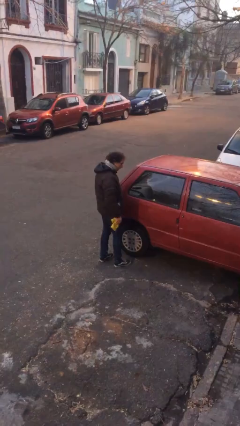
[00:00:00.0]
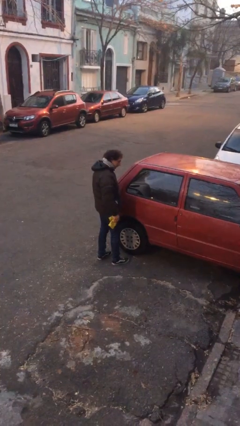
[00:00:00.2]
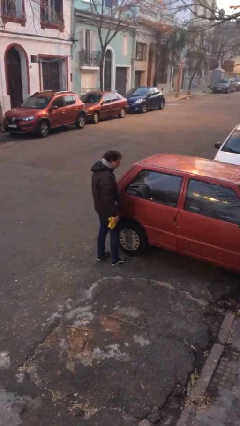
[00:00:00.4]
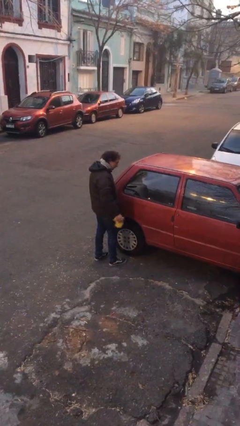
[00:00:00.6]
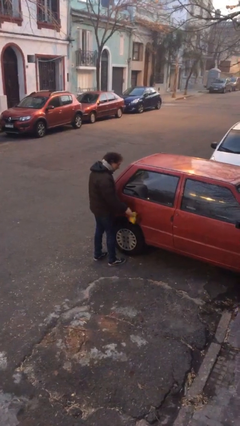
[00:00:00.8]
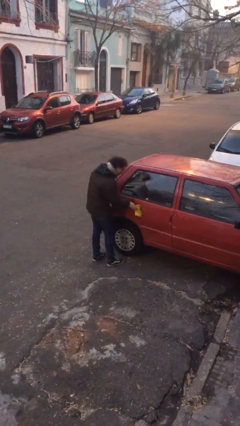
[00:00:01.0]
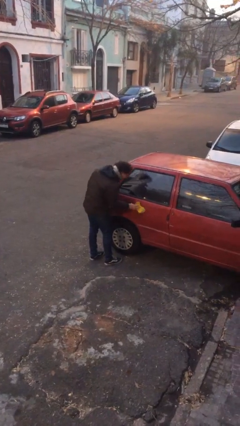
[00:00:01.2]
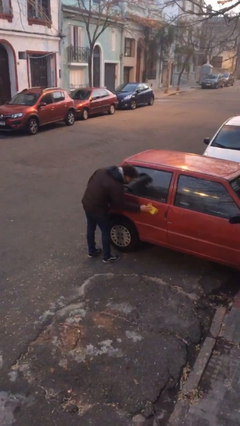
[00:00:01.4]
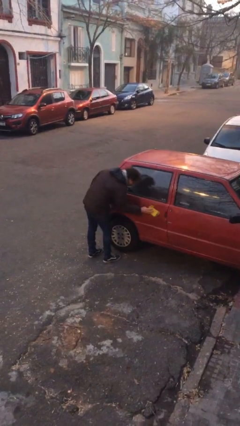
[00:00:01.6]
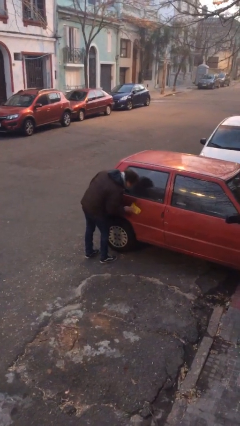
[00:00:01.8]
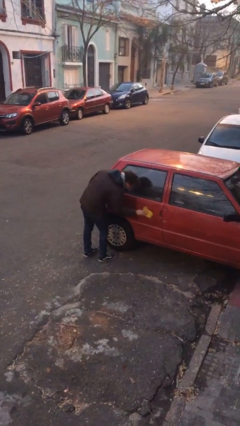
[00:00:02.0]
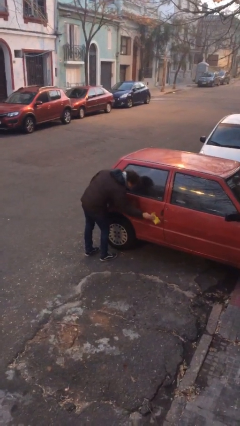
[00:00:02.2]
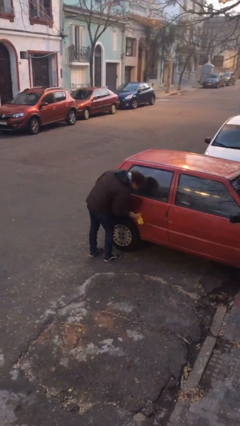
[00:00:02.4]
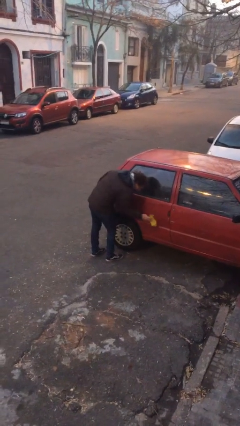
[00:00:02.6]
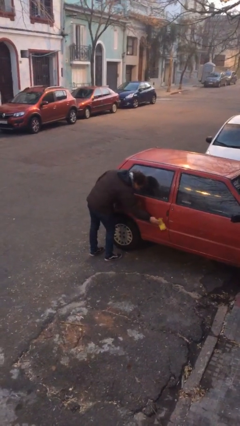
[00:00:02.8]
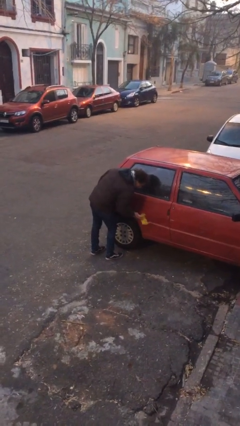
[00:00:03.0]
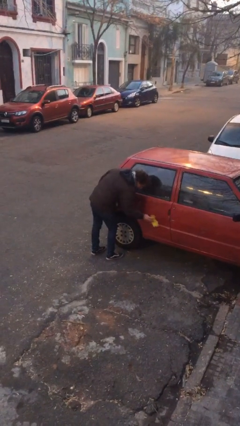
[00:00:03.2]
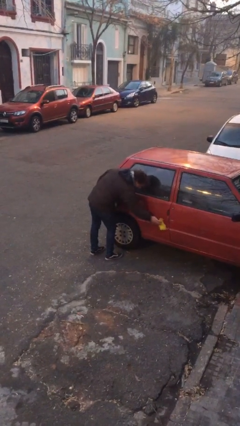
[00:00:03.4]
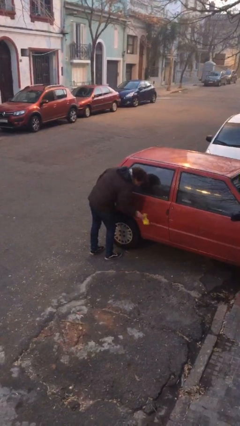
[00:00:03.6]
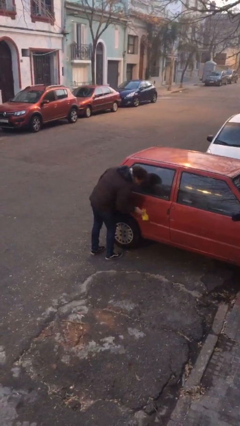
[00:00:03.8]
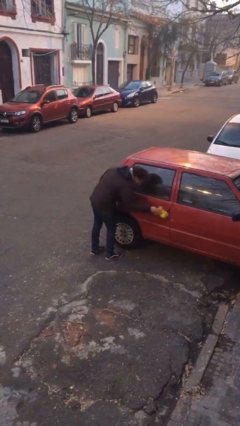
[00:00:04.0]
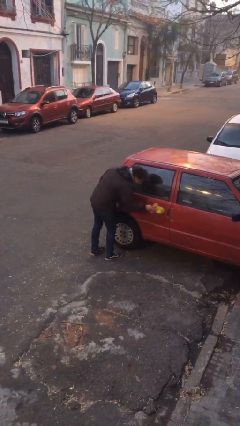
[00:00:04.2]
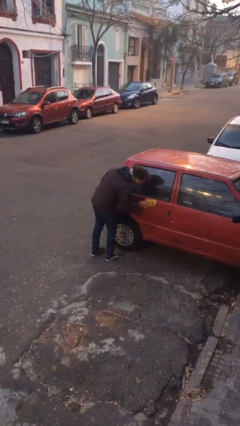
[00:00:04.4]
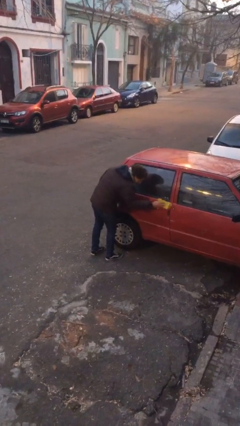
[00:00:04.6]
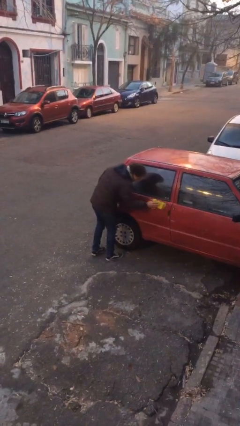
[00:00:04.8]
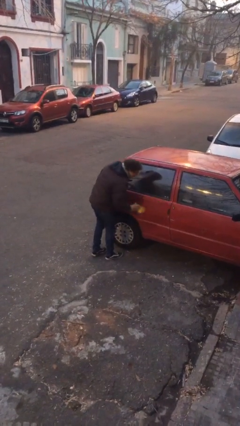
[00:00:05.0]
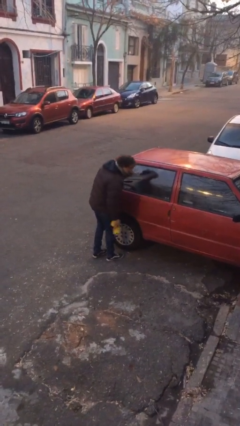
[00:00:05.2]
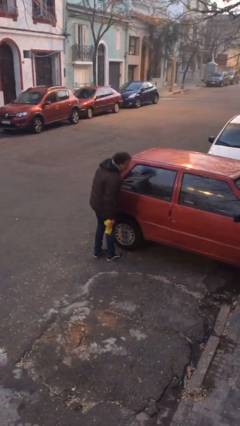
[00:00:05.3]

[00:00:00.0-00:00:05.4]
person polishes car with rag

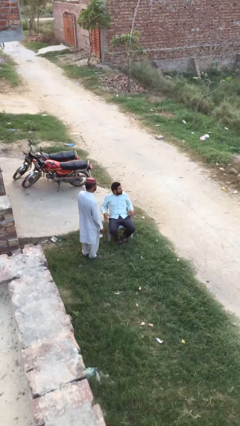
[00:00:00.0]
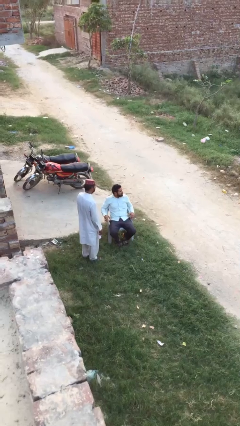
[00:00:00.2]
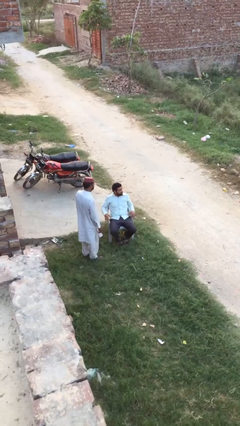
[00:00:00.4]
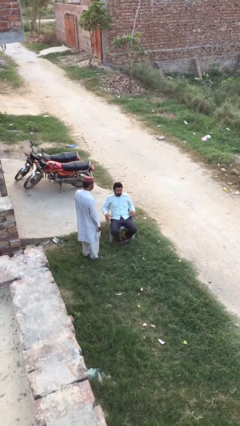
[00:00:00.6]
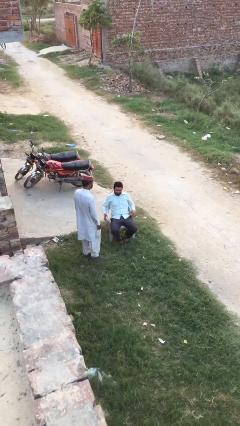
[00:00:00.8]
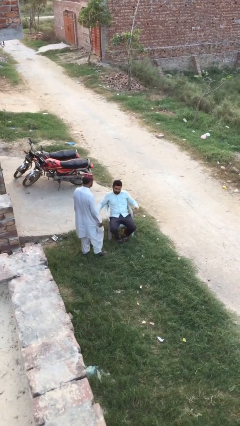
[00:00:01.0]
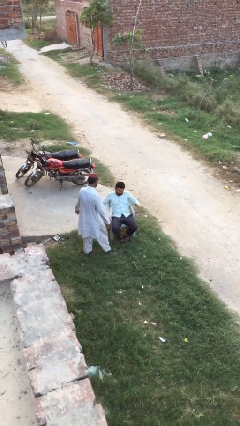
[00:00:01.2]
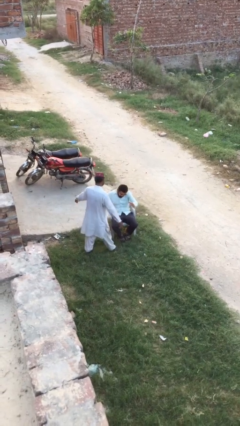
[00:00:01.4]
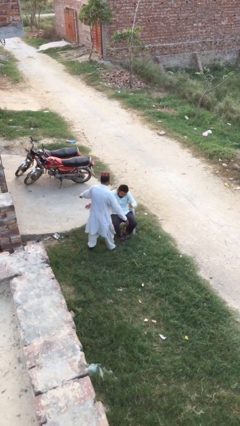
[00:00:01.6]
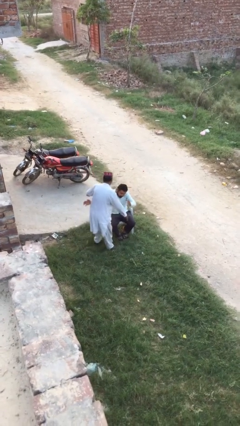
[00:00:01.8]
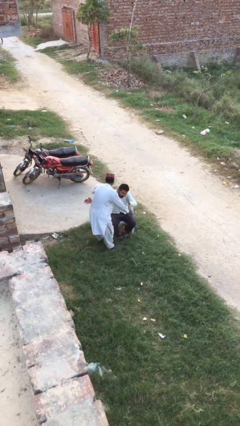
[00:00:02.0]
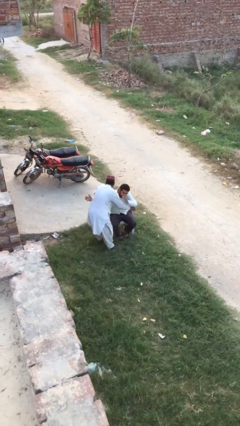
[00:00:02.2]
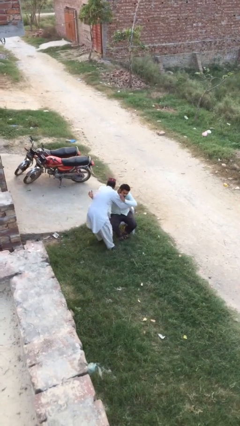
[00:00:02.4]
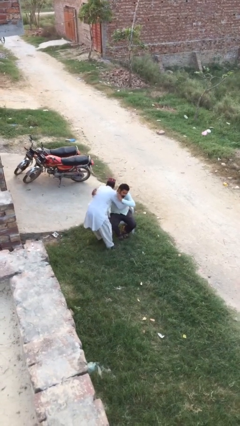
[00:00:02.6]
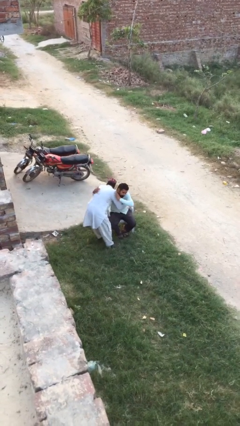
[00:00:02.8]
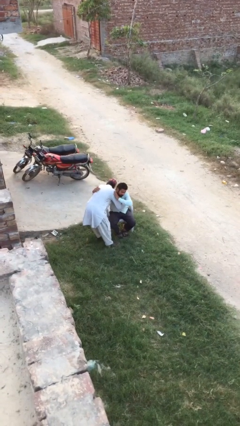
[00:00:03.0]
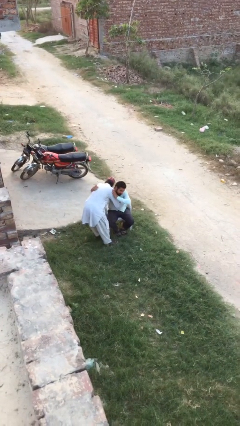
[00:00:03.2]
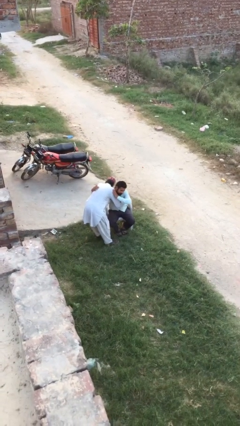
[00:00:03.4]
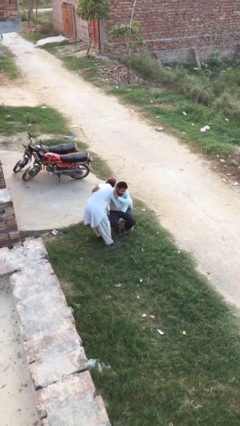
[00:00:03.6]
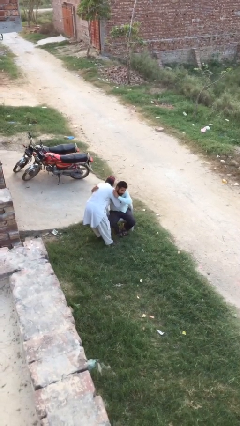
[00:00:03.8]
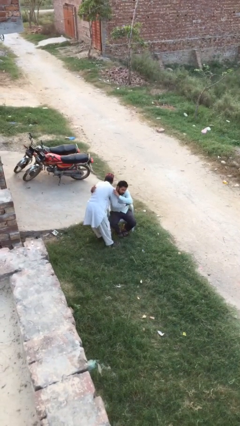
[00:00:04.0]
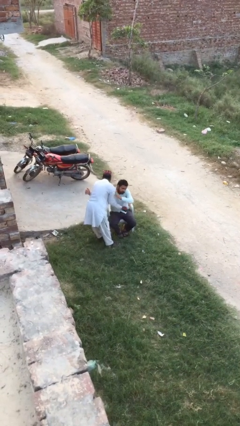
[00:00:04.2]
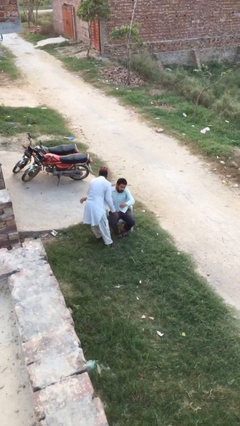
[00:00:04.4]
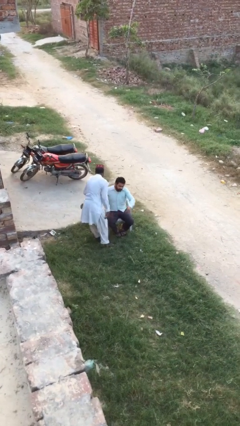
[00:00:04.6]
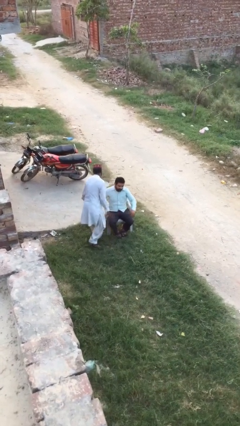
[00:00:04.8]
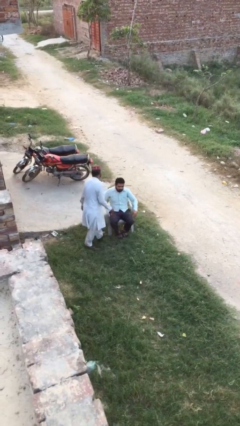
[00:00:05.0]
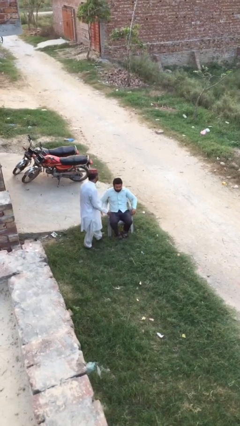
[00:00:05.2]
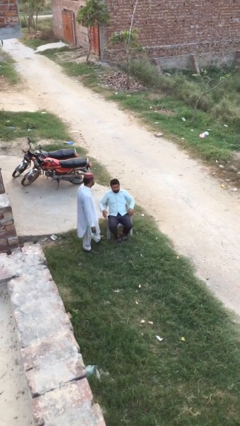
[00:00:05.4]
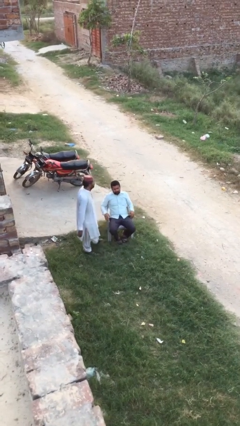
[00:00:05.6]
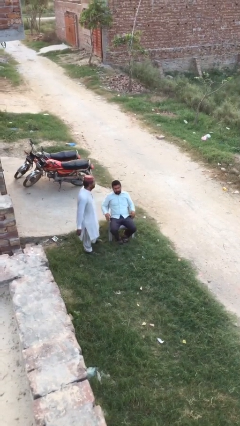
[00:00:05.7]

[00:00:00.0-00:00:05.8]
person embraces person

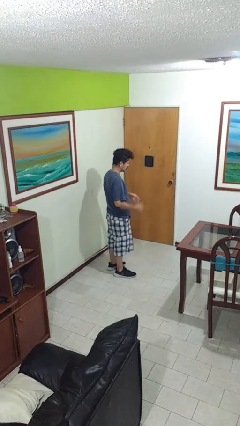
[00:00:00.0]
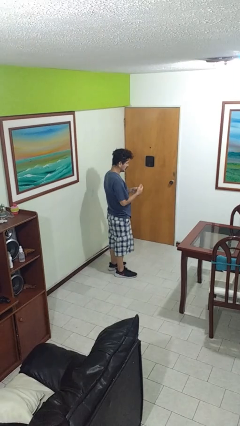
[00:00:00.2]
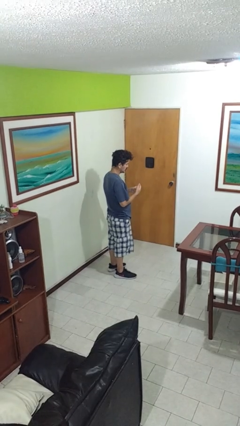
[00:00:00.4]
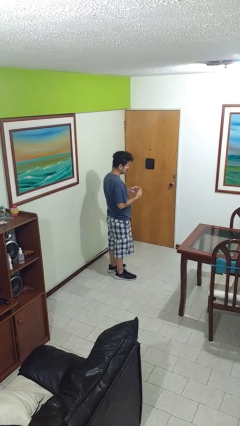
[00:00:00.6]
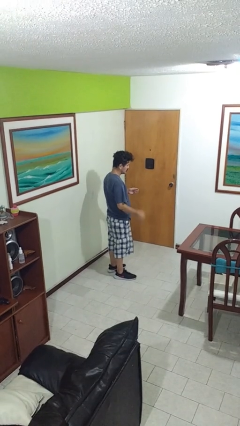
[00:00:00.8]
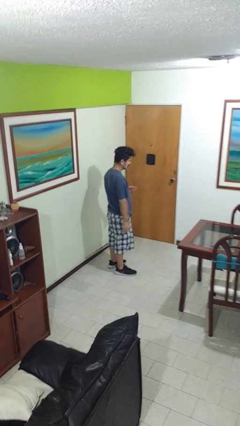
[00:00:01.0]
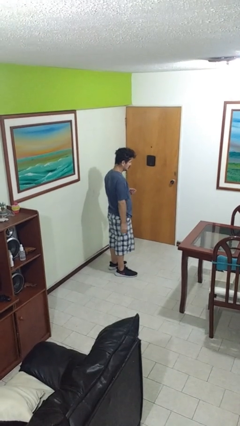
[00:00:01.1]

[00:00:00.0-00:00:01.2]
person takes off ring

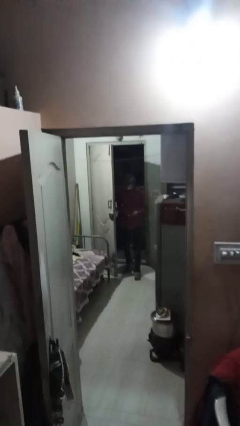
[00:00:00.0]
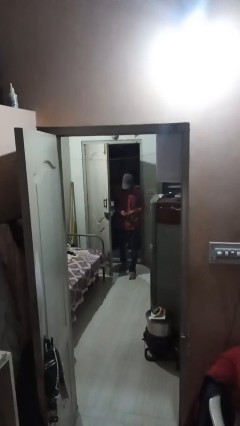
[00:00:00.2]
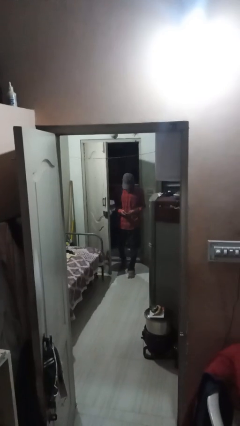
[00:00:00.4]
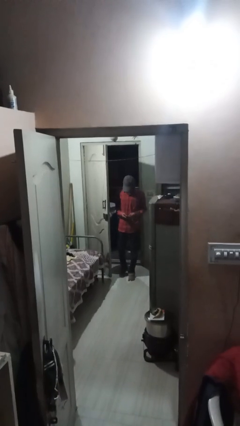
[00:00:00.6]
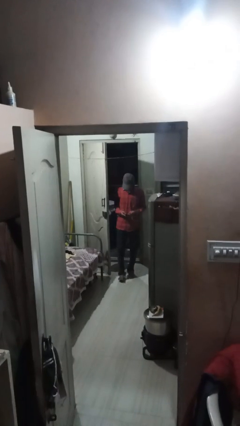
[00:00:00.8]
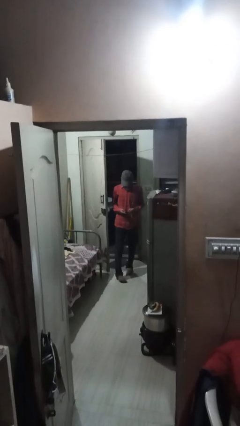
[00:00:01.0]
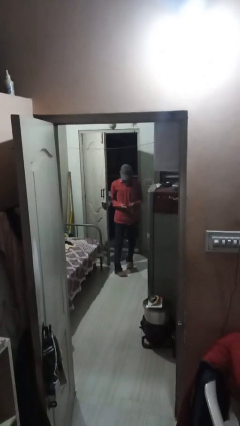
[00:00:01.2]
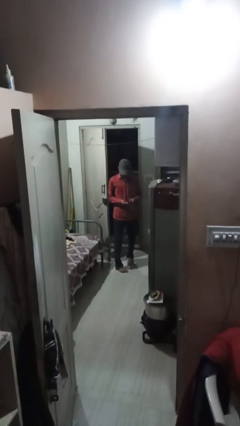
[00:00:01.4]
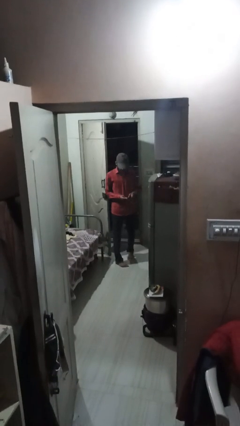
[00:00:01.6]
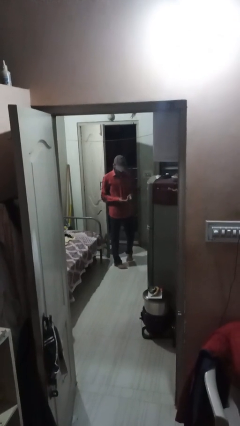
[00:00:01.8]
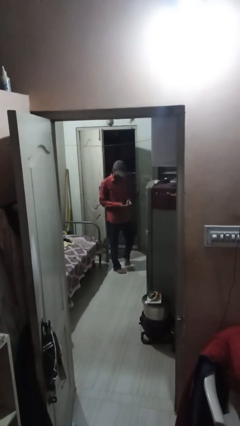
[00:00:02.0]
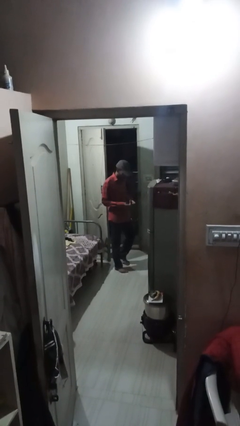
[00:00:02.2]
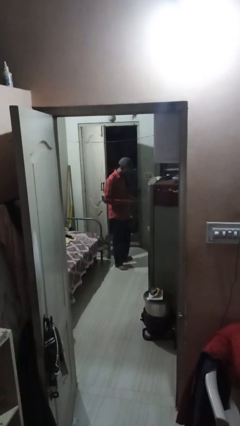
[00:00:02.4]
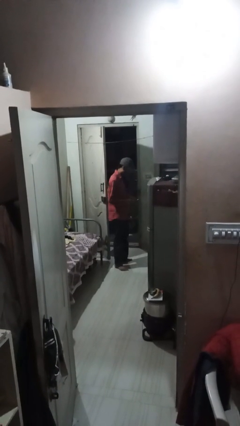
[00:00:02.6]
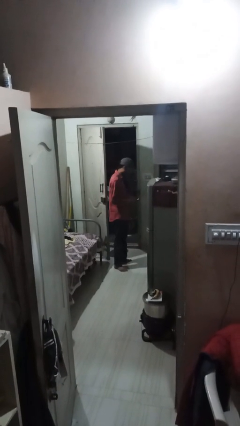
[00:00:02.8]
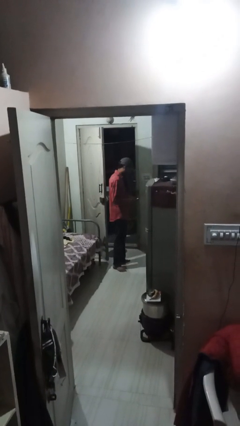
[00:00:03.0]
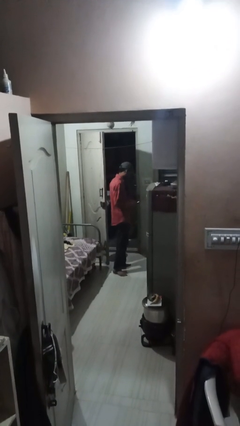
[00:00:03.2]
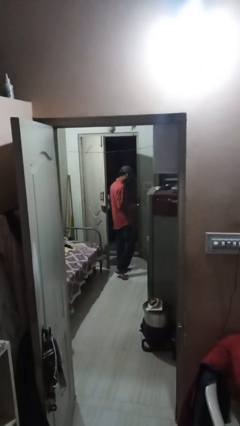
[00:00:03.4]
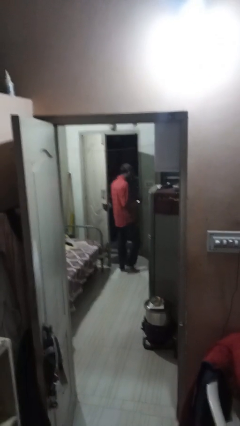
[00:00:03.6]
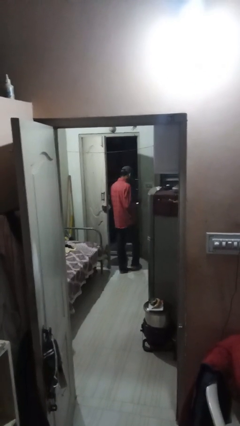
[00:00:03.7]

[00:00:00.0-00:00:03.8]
person enters scene through structure

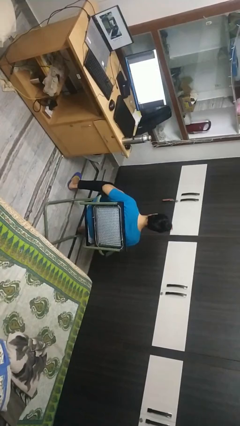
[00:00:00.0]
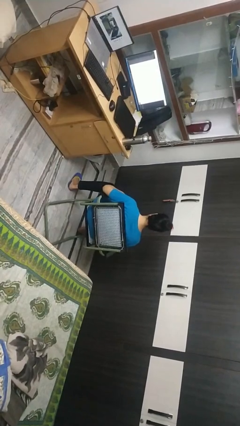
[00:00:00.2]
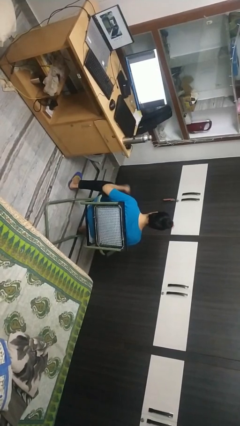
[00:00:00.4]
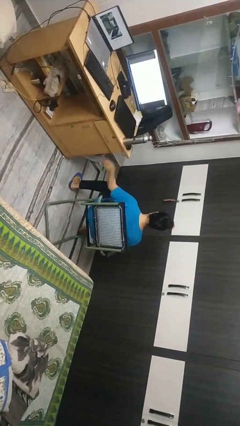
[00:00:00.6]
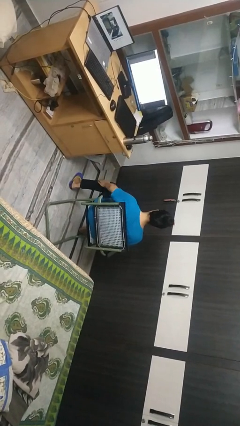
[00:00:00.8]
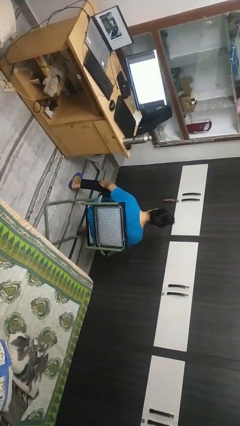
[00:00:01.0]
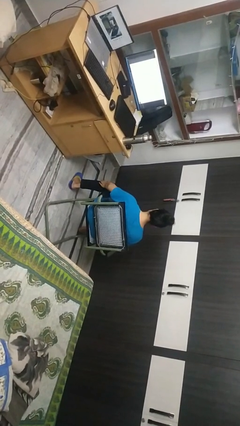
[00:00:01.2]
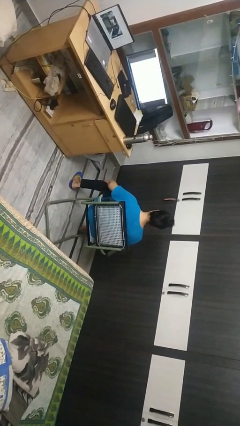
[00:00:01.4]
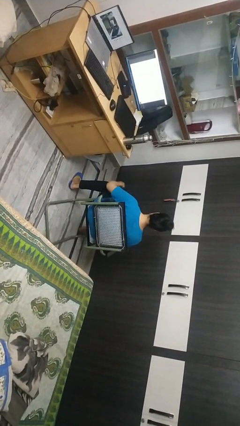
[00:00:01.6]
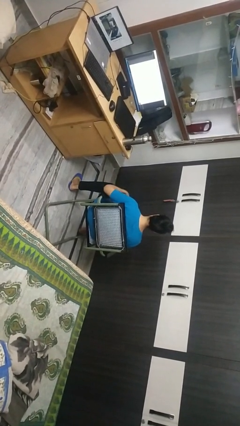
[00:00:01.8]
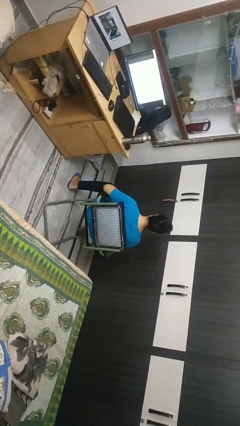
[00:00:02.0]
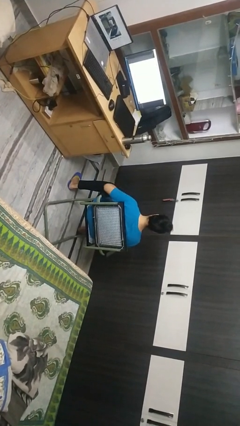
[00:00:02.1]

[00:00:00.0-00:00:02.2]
person swats bug
